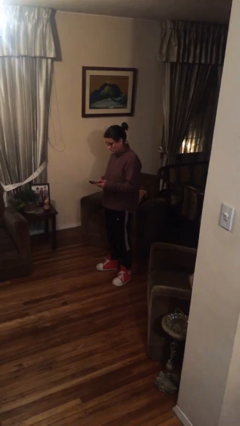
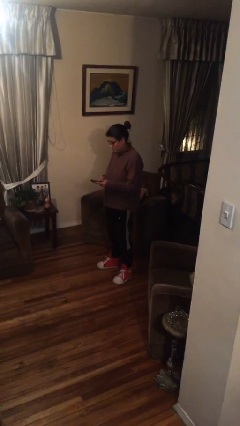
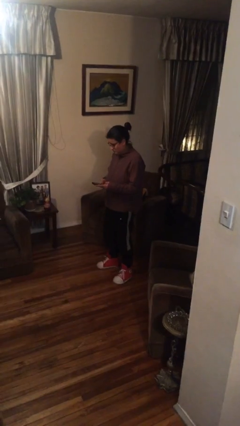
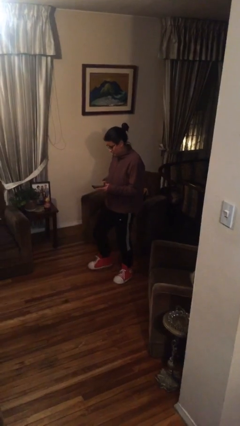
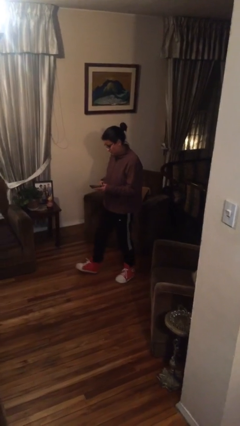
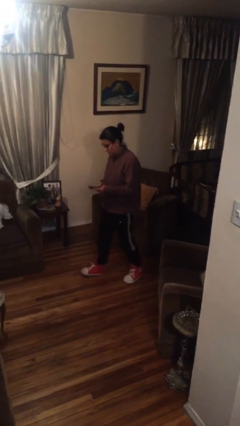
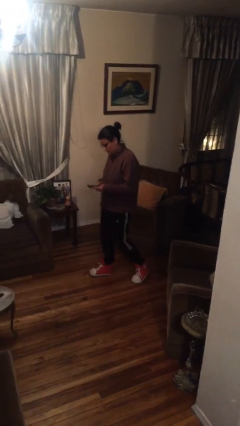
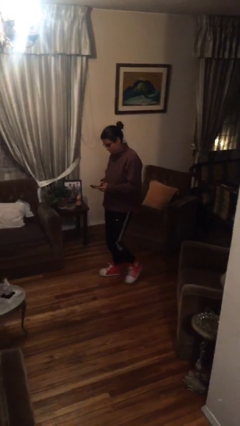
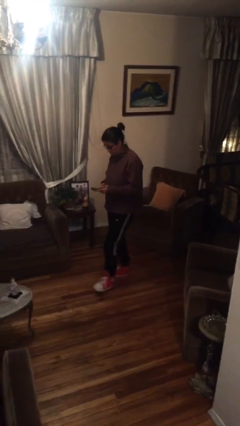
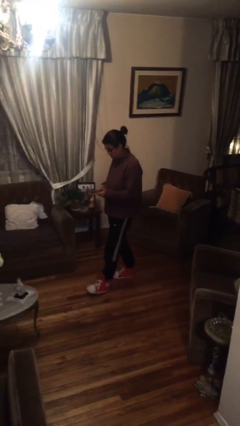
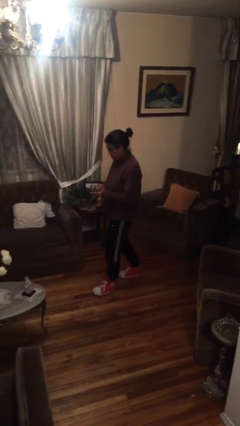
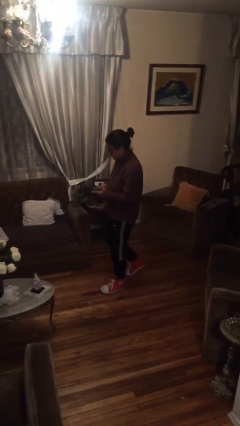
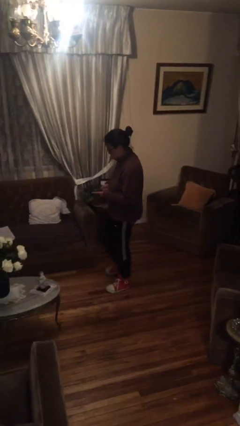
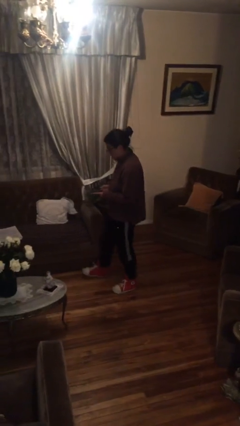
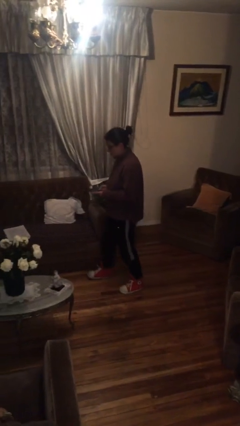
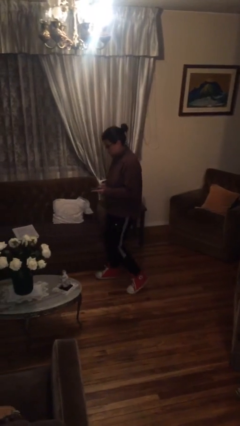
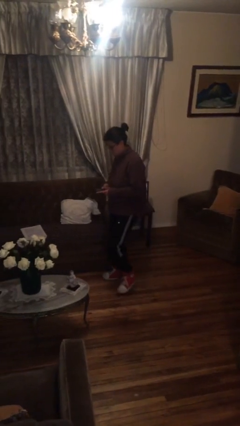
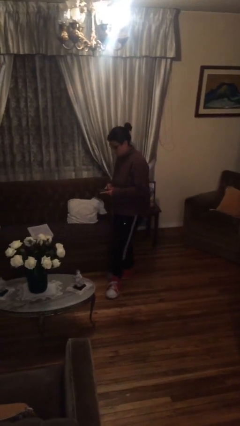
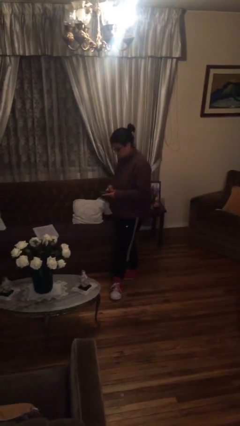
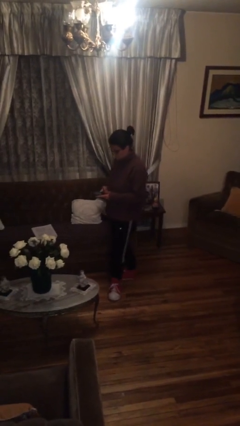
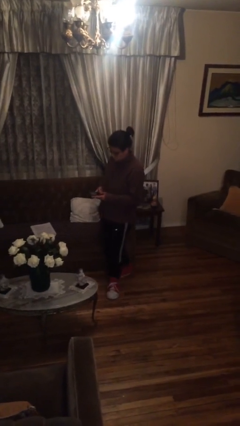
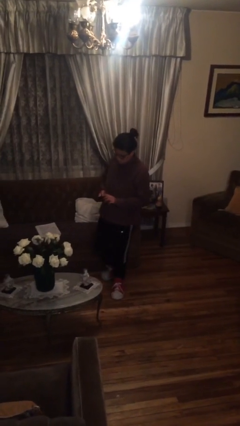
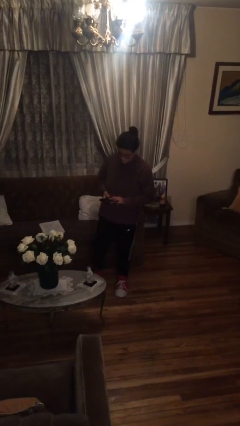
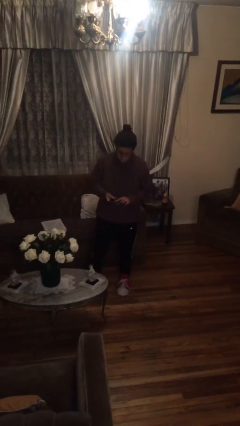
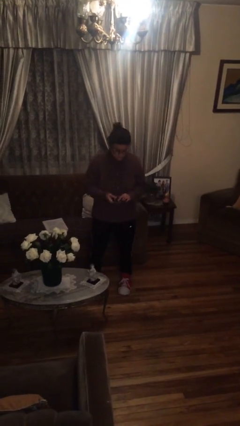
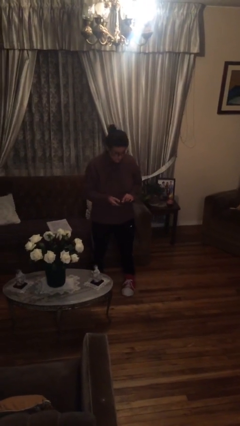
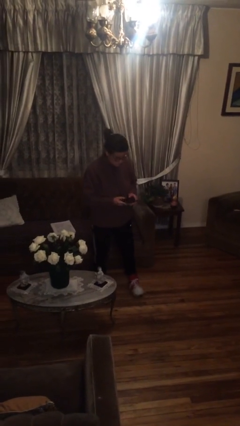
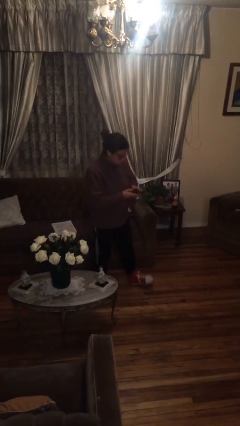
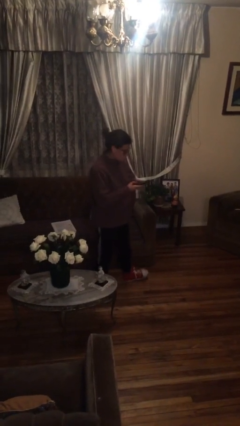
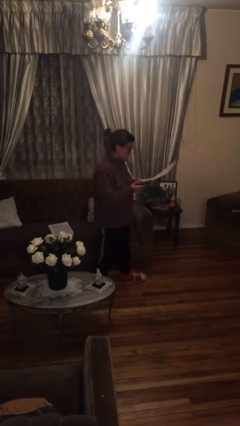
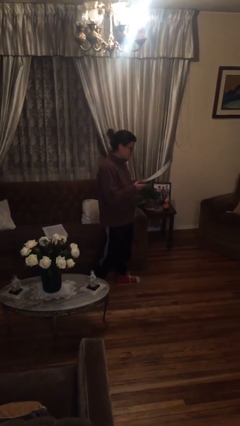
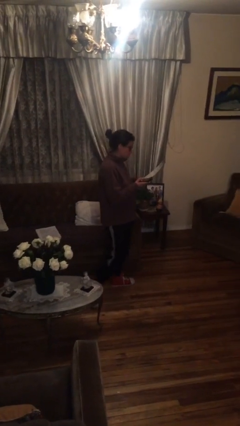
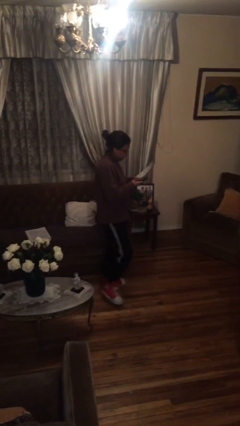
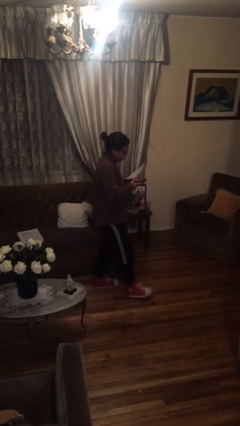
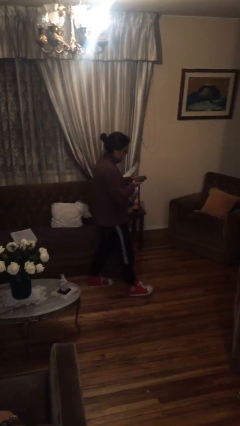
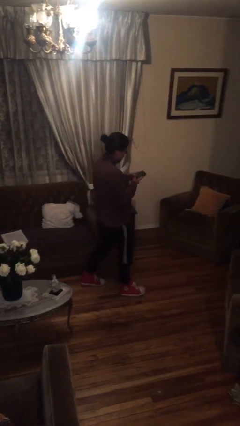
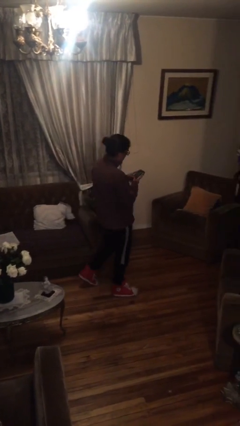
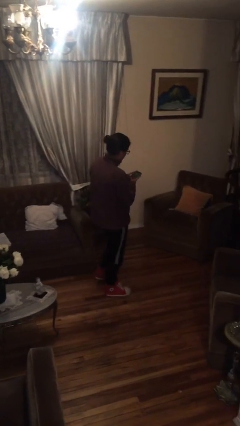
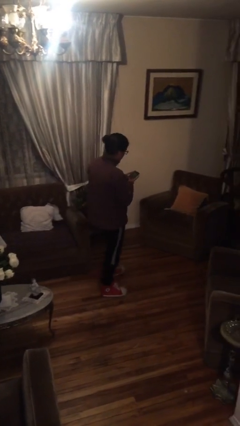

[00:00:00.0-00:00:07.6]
person texts on phone

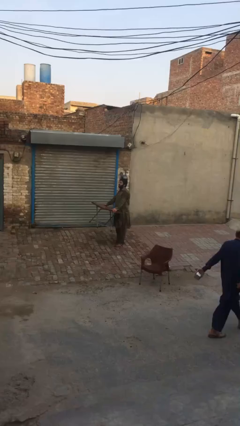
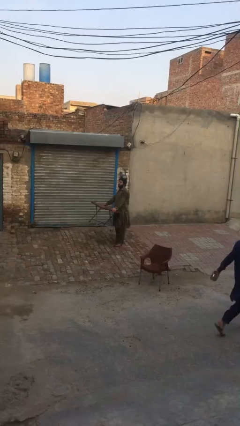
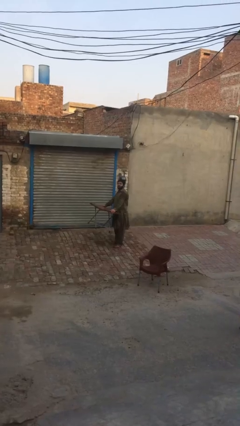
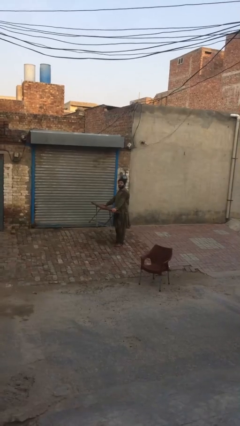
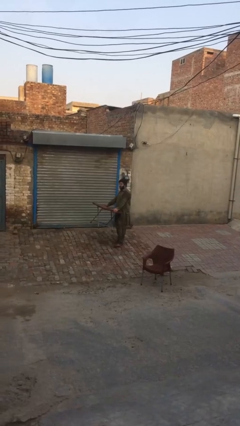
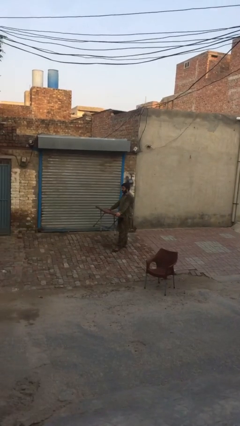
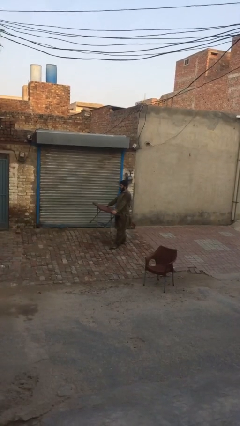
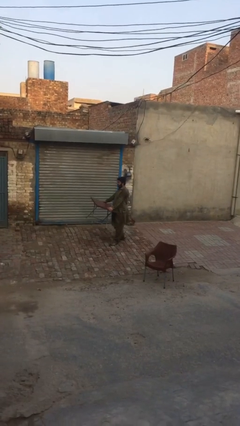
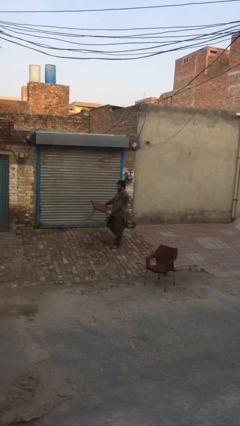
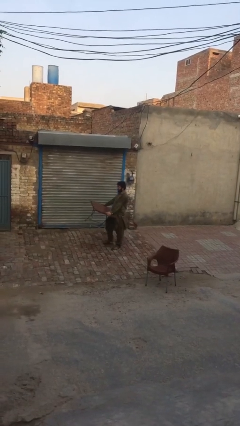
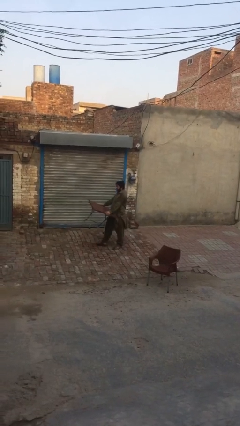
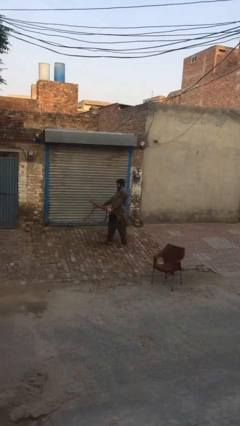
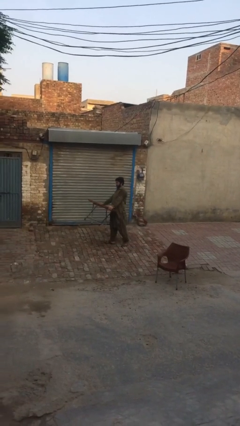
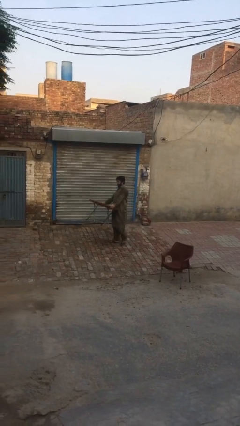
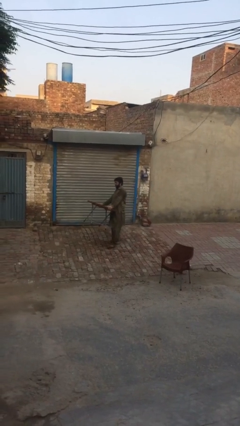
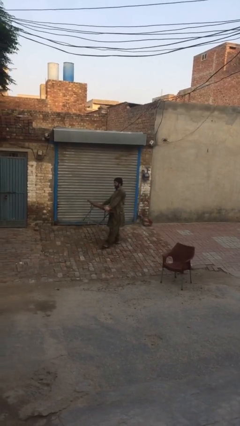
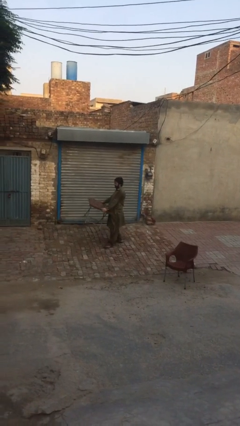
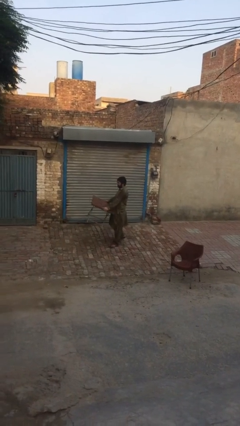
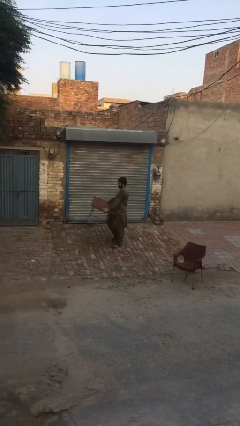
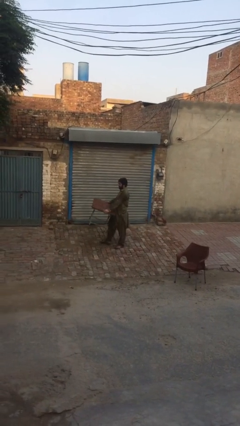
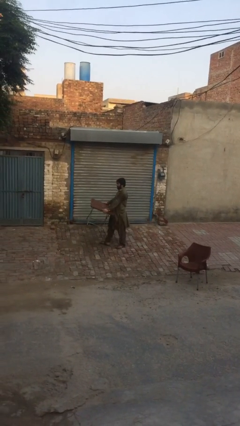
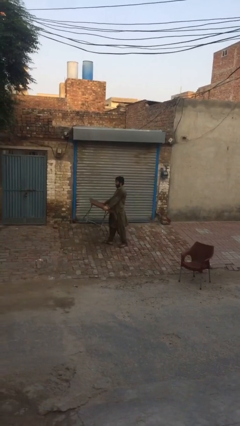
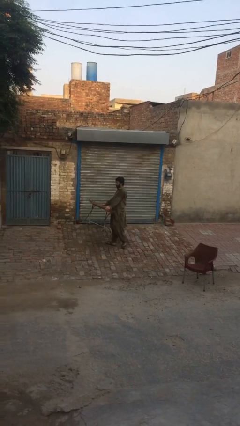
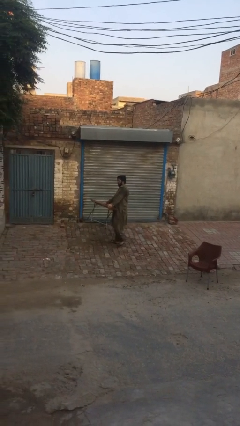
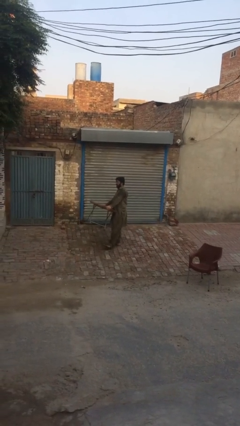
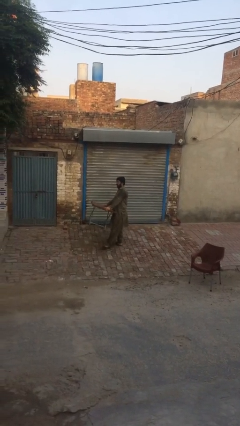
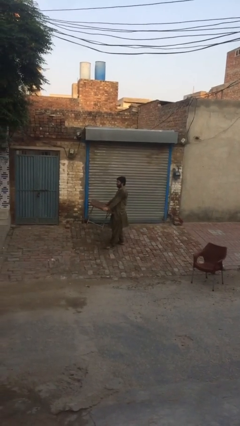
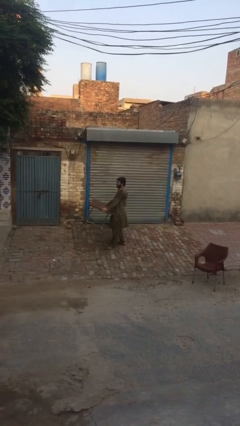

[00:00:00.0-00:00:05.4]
person carries heavy object

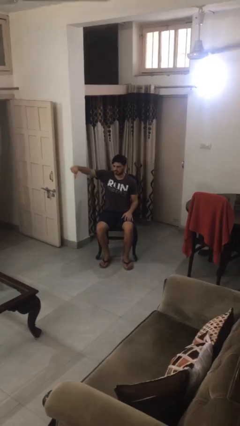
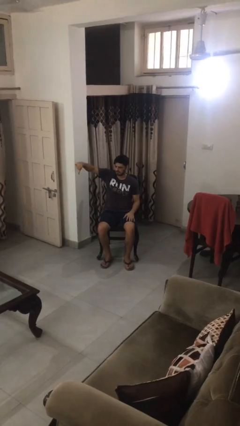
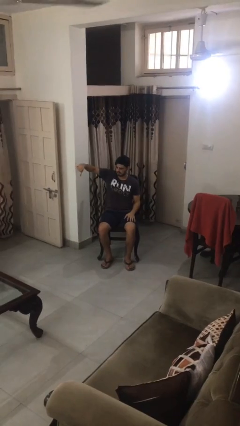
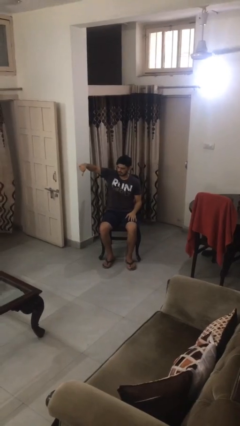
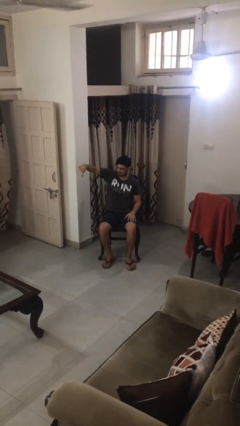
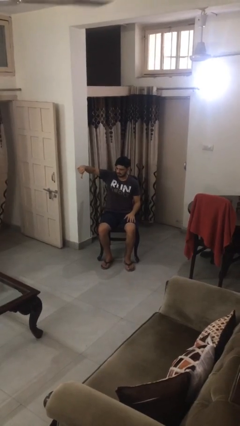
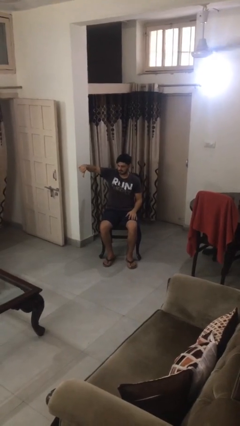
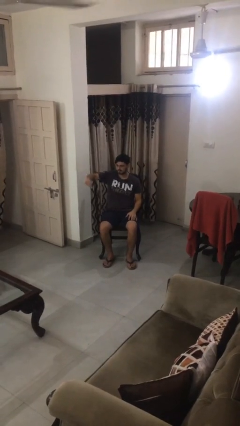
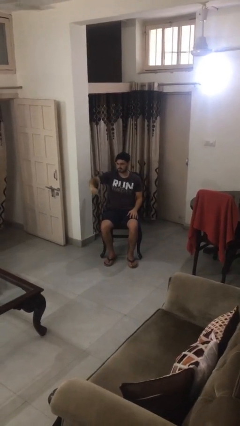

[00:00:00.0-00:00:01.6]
person gestures thumbs down

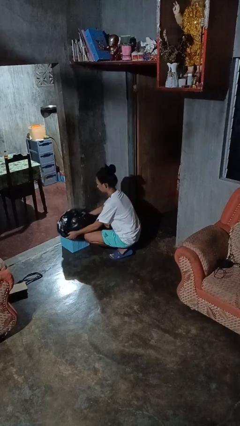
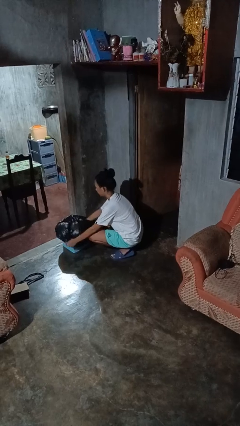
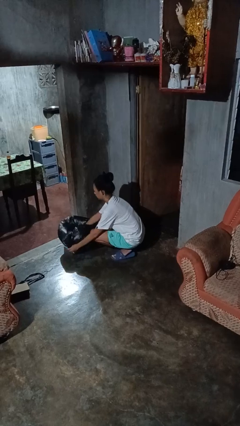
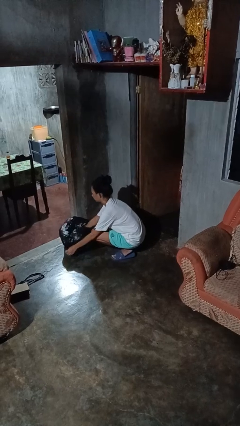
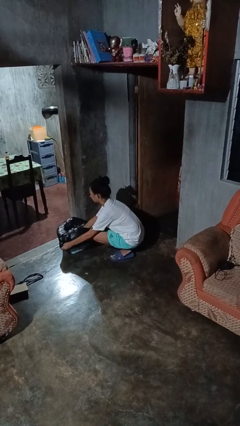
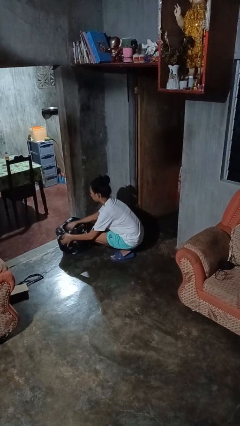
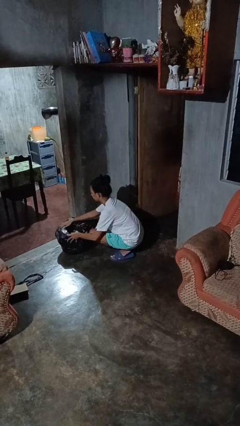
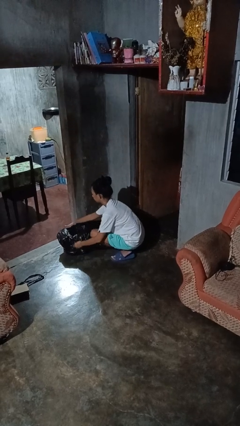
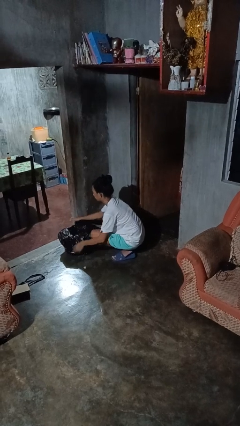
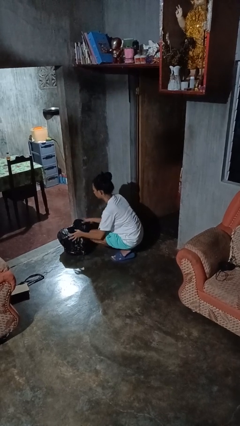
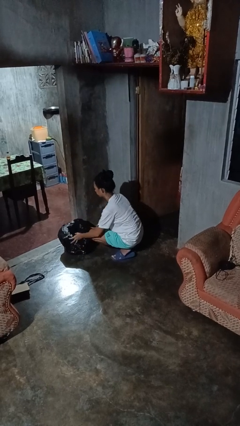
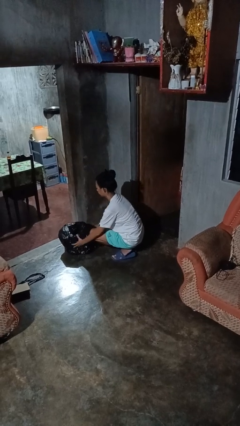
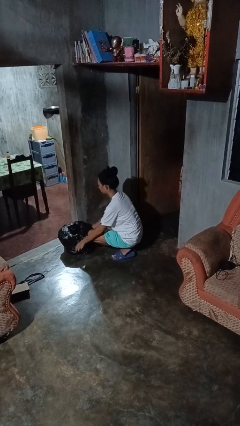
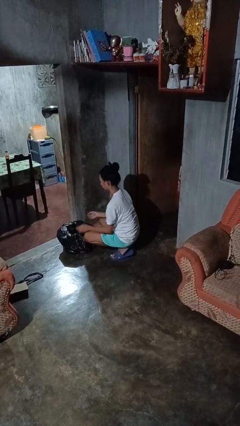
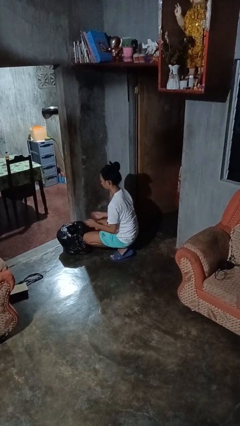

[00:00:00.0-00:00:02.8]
person inserts trashbag into trashcan

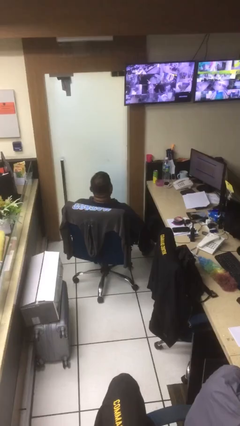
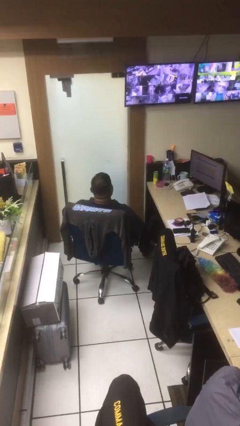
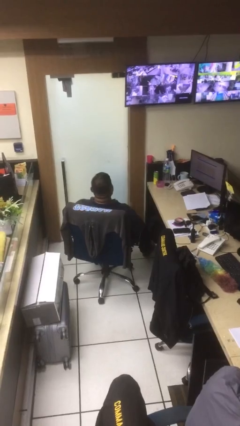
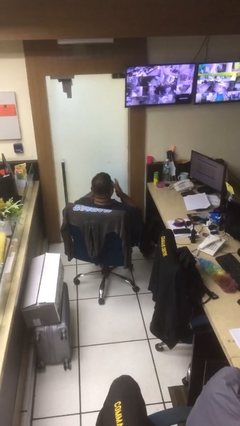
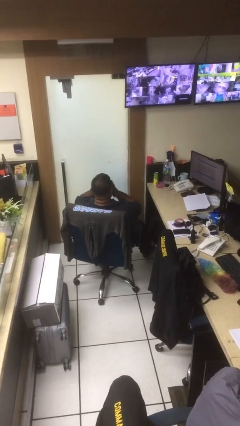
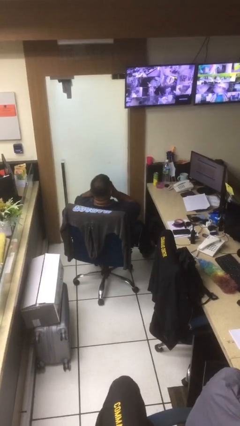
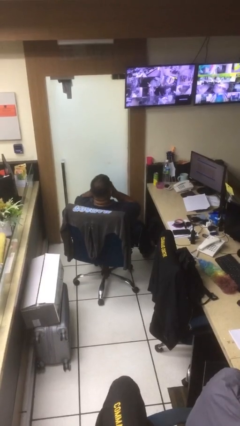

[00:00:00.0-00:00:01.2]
person covers face with hands
